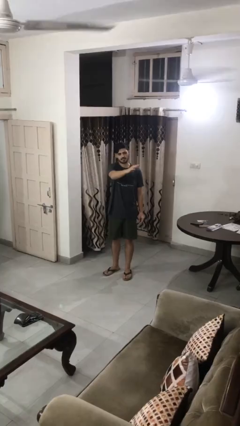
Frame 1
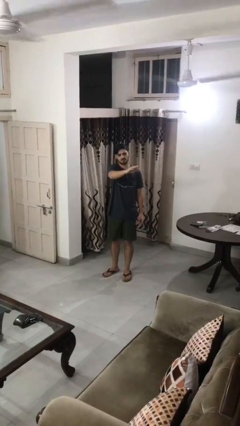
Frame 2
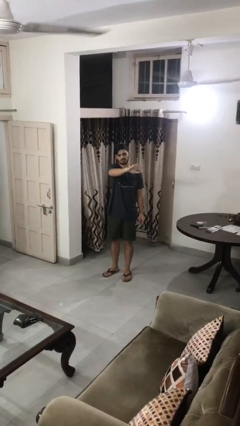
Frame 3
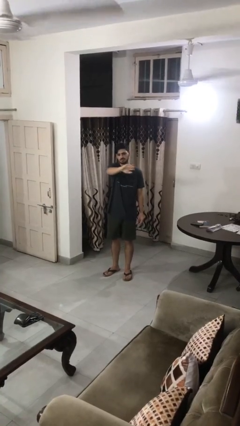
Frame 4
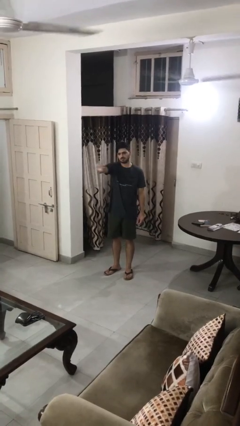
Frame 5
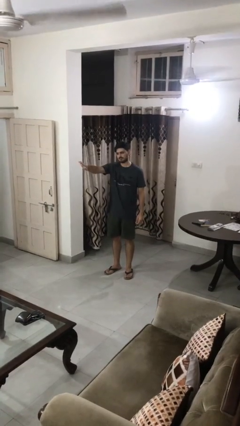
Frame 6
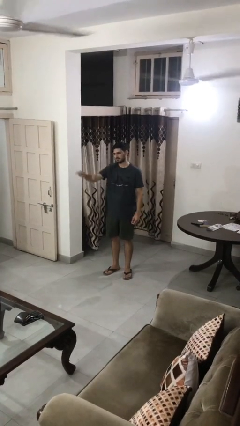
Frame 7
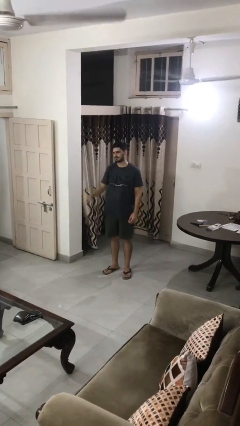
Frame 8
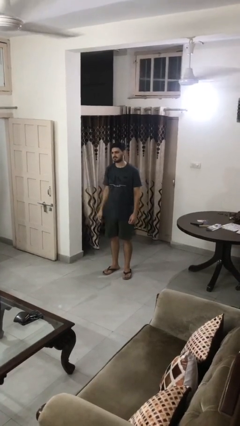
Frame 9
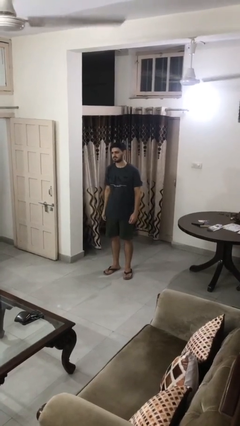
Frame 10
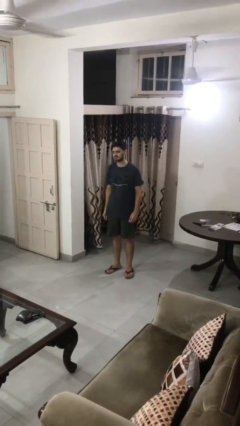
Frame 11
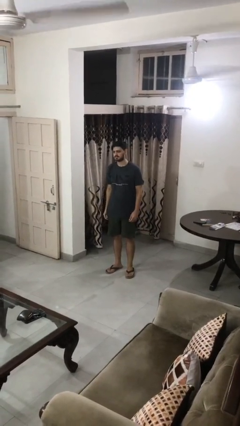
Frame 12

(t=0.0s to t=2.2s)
person gestures swipe right

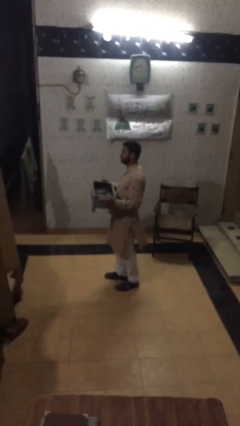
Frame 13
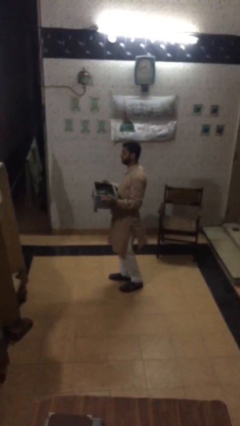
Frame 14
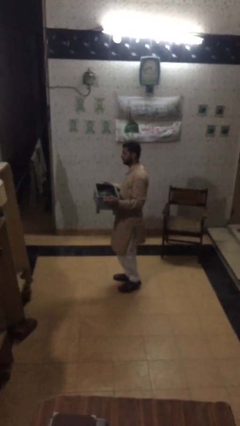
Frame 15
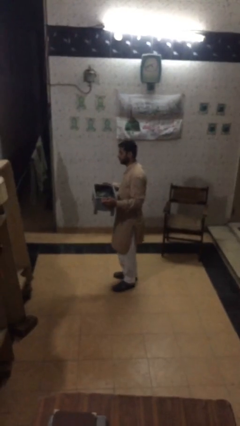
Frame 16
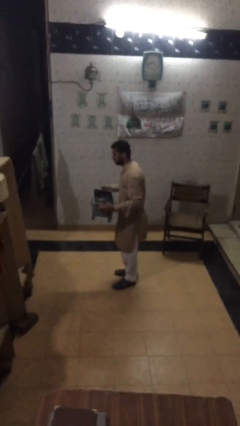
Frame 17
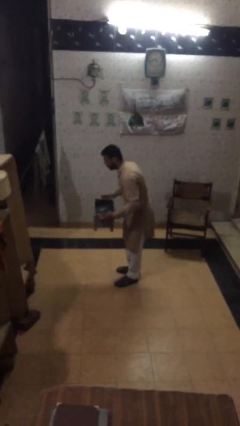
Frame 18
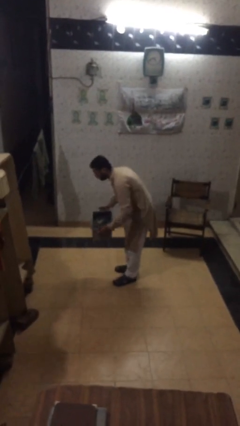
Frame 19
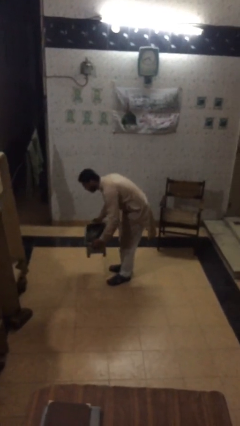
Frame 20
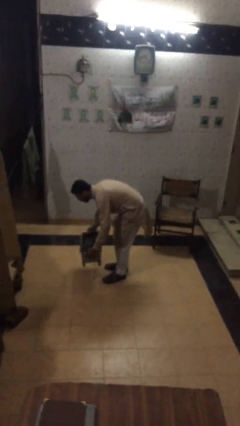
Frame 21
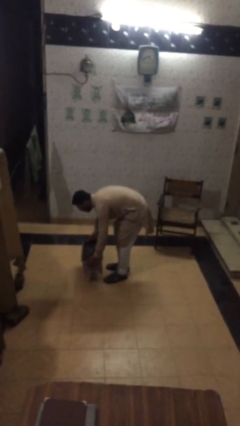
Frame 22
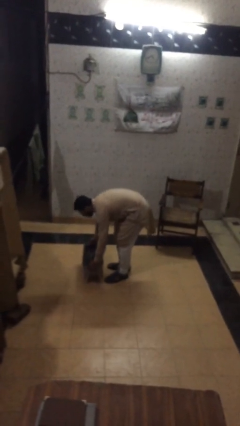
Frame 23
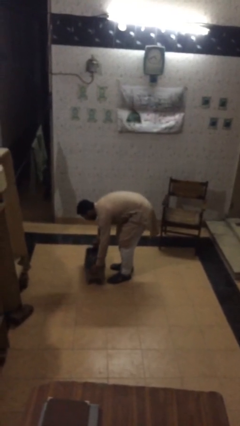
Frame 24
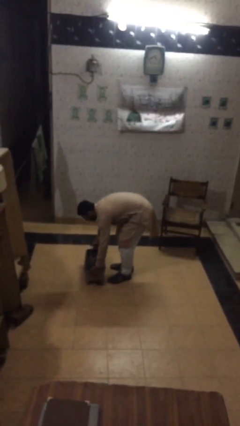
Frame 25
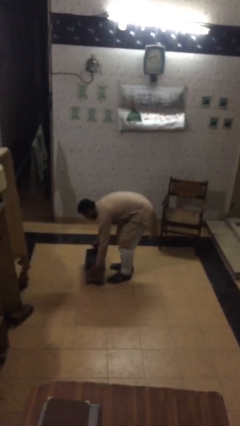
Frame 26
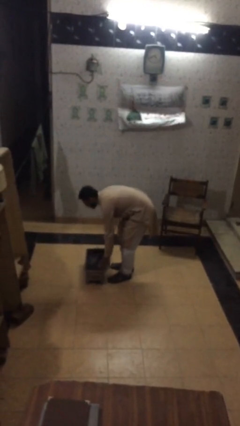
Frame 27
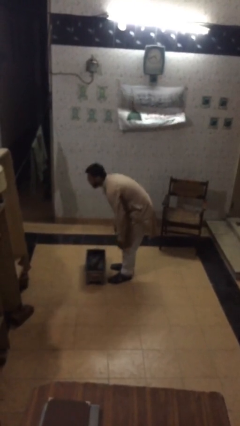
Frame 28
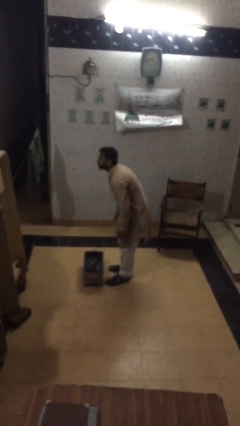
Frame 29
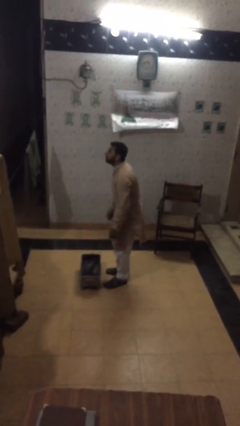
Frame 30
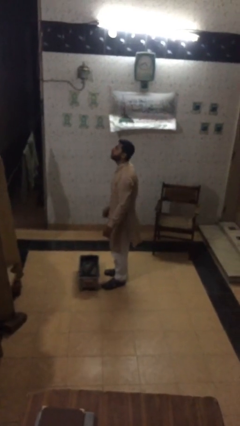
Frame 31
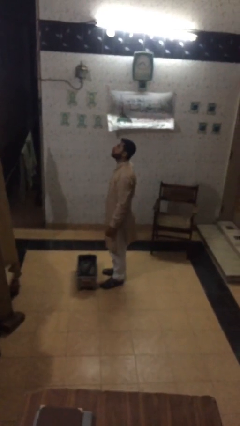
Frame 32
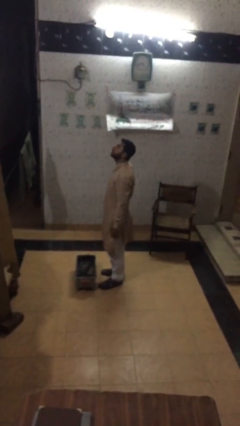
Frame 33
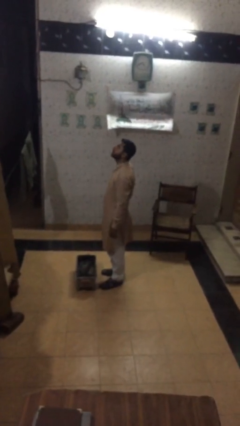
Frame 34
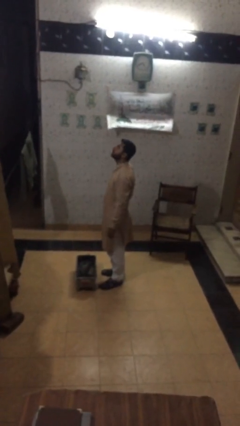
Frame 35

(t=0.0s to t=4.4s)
person puts down object on floor

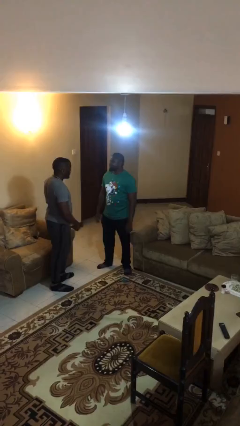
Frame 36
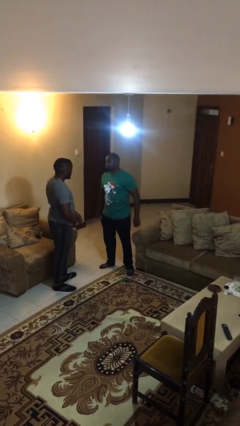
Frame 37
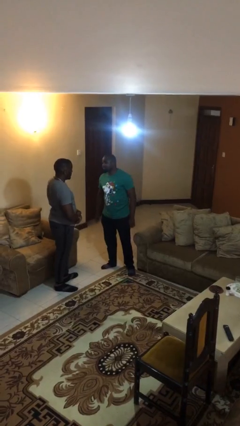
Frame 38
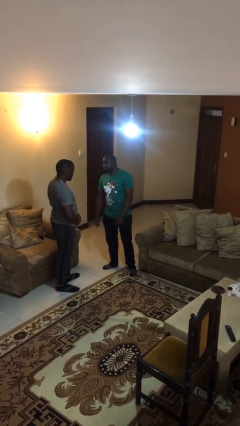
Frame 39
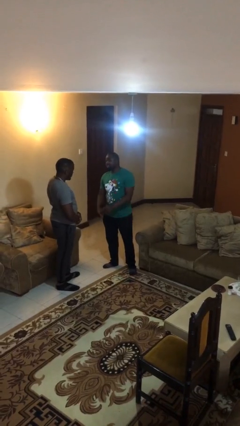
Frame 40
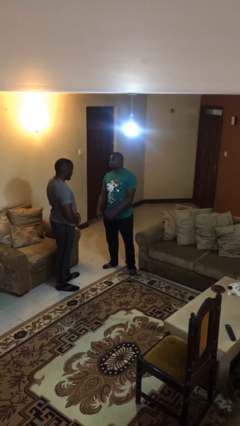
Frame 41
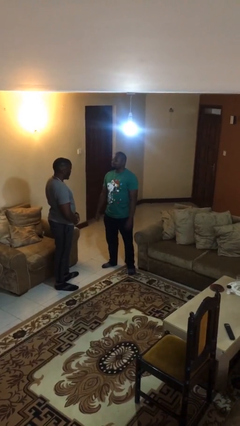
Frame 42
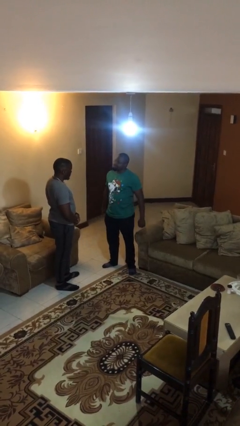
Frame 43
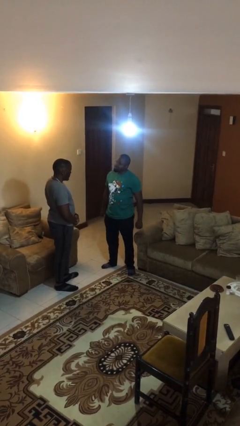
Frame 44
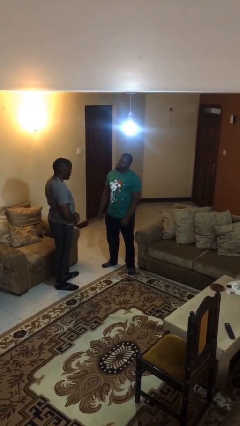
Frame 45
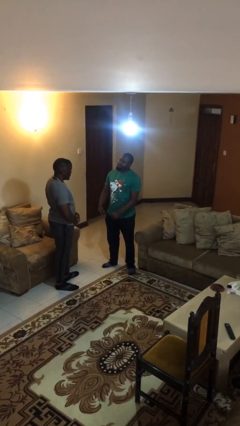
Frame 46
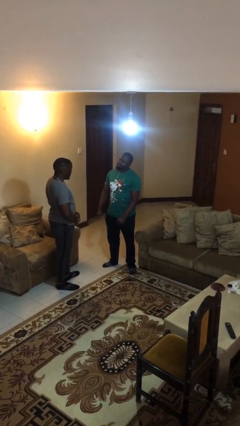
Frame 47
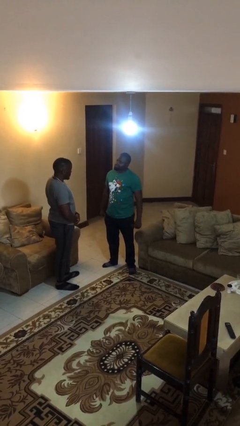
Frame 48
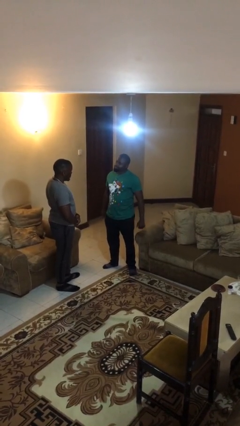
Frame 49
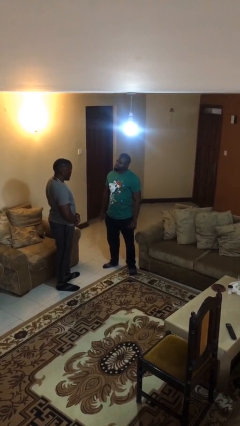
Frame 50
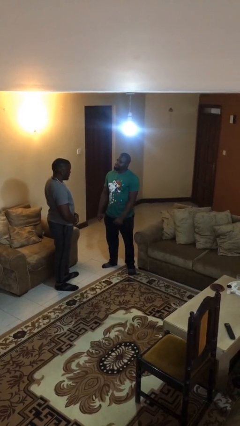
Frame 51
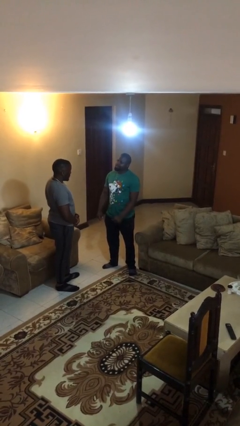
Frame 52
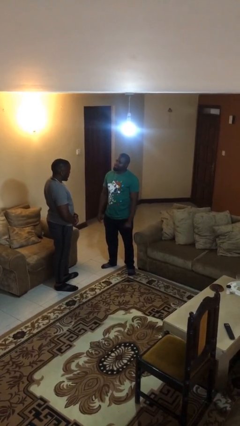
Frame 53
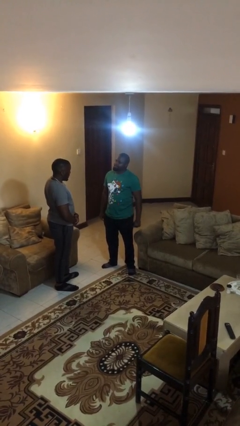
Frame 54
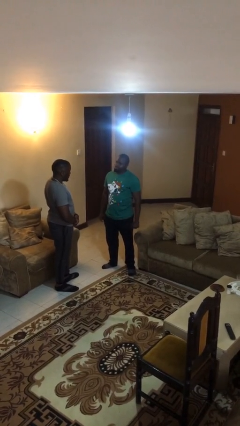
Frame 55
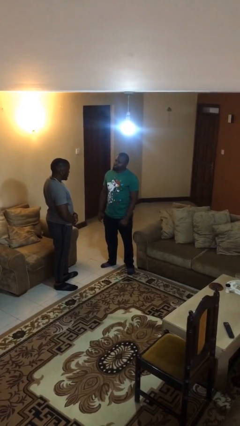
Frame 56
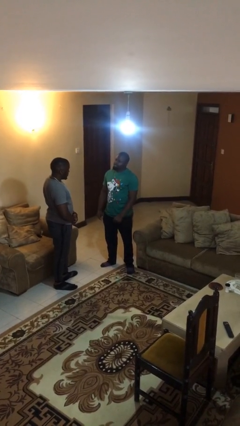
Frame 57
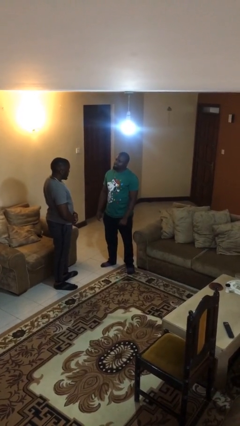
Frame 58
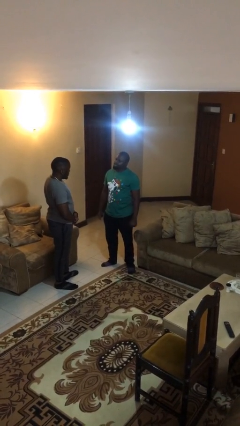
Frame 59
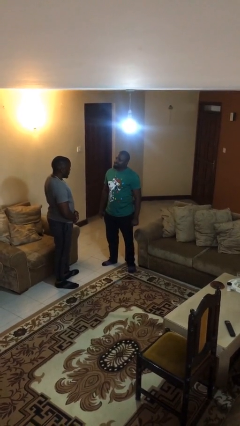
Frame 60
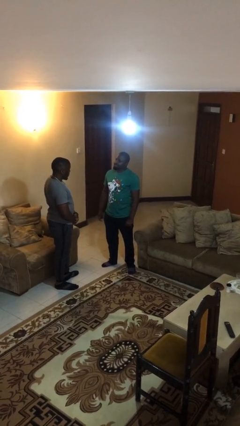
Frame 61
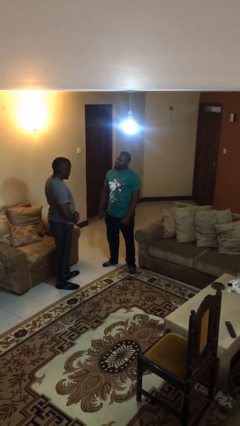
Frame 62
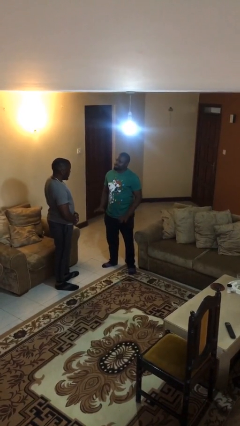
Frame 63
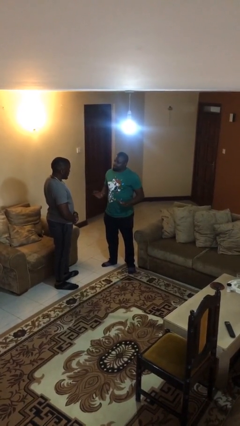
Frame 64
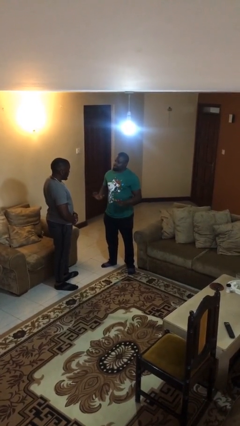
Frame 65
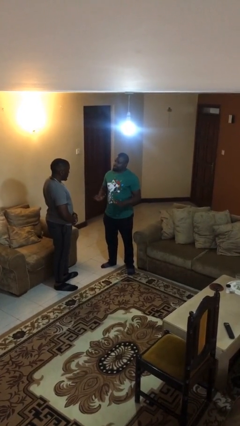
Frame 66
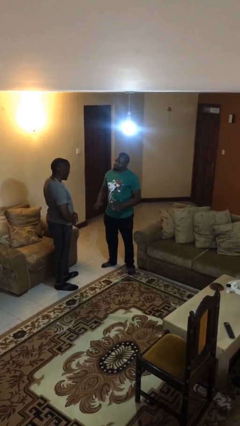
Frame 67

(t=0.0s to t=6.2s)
person talks to person

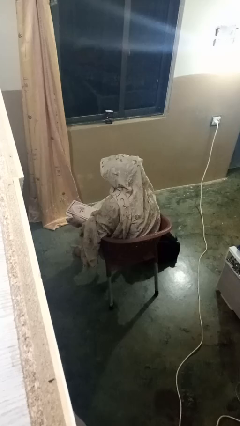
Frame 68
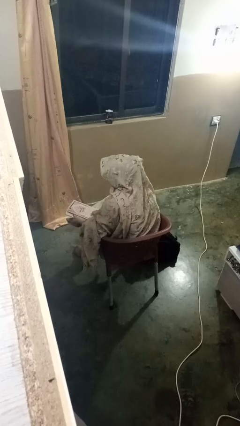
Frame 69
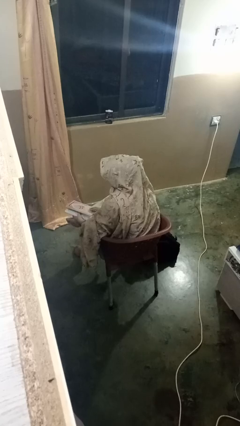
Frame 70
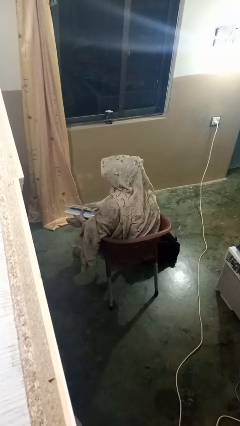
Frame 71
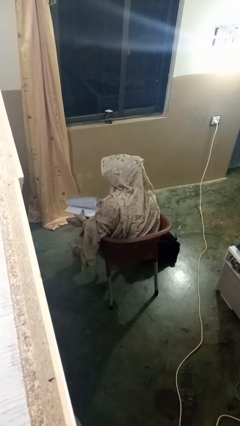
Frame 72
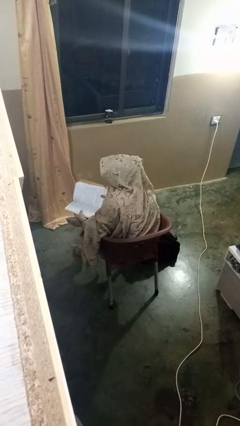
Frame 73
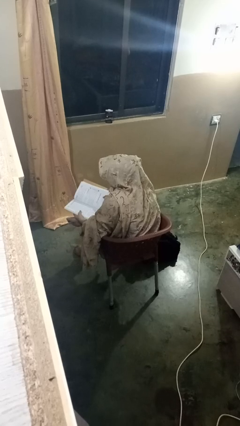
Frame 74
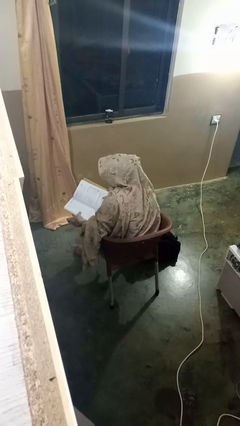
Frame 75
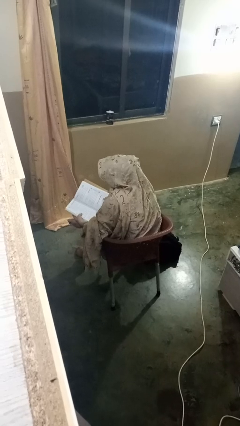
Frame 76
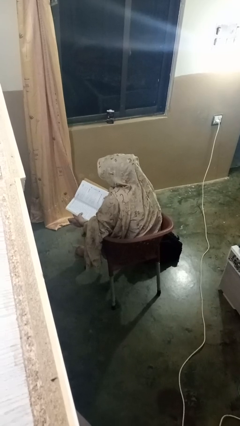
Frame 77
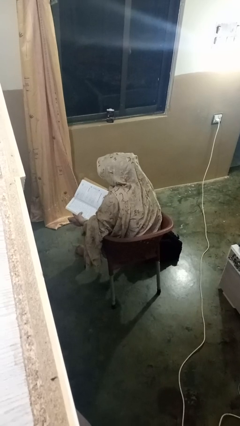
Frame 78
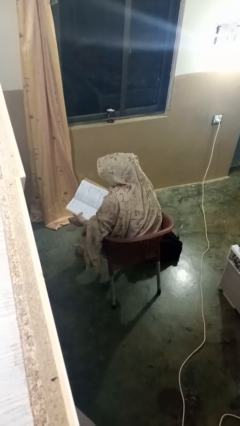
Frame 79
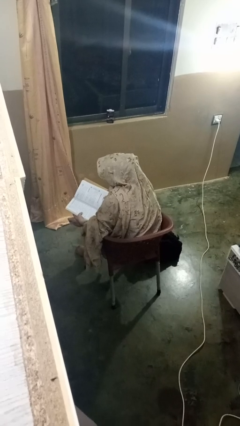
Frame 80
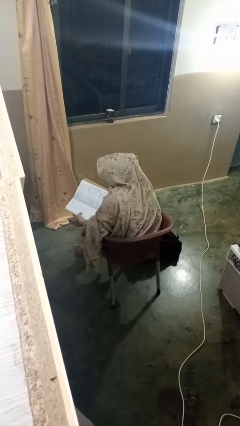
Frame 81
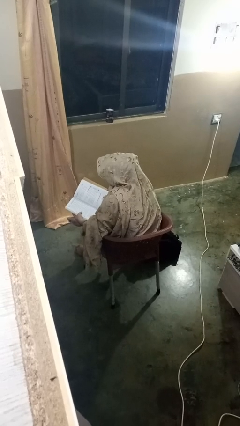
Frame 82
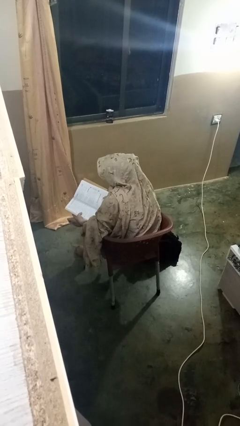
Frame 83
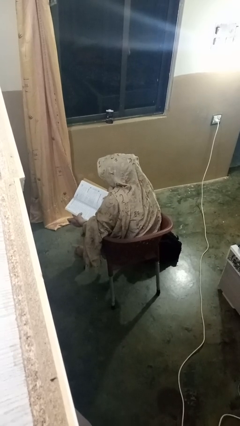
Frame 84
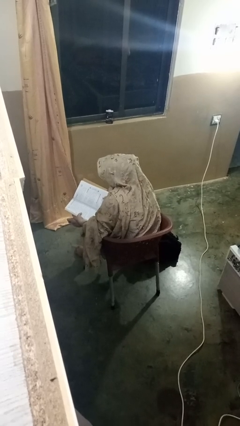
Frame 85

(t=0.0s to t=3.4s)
person reads book

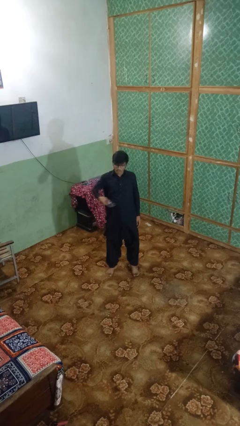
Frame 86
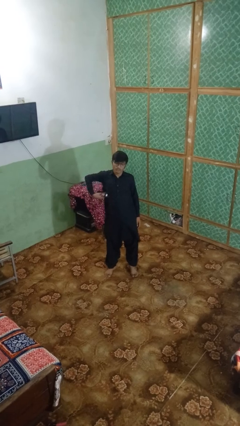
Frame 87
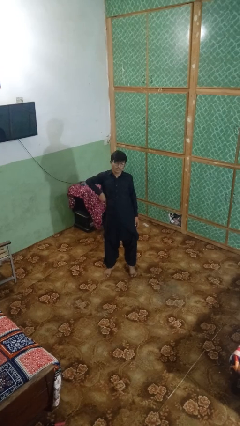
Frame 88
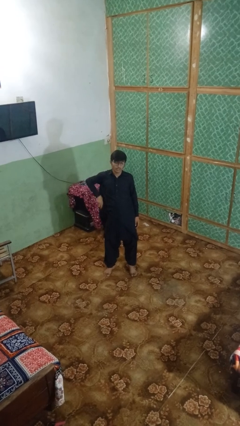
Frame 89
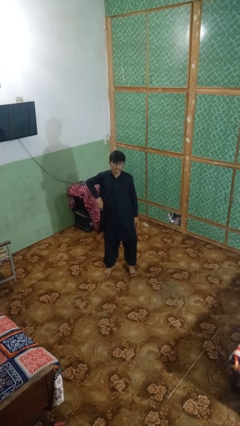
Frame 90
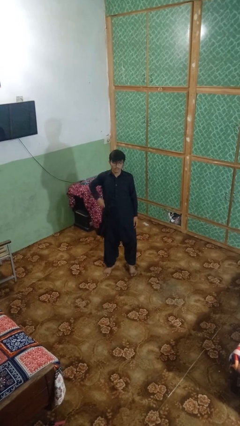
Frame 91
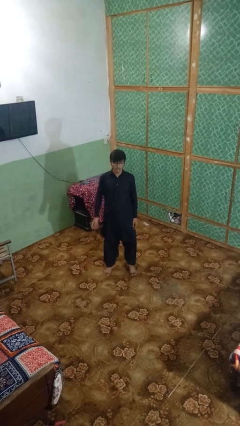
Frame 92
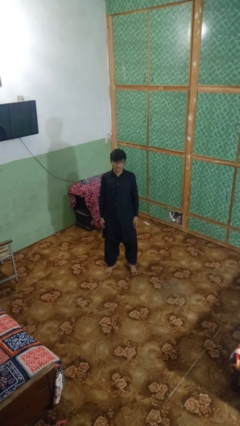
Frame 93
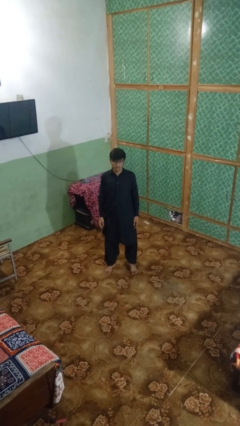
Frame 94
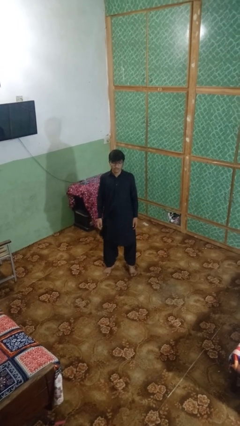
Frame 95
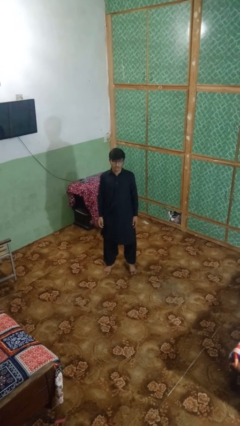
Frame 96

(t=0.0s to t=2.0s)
person puts phone into pocket
